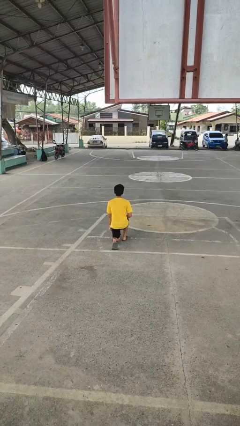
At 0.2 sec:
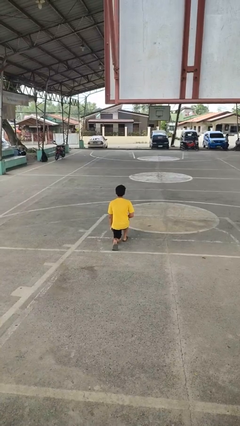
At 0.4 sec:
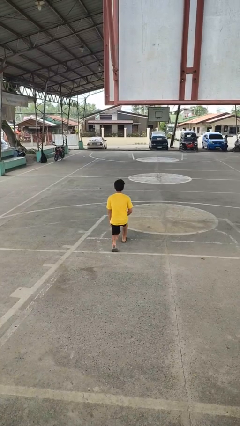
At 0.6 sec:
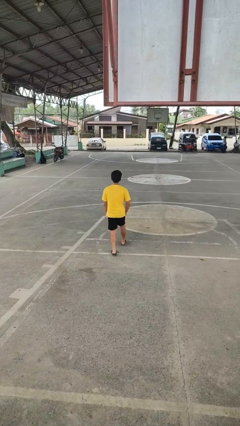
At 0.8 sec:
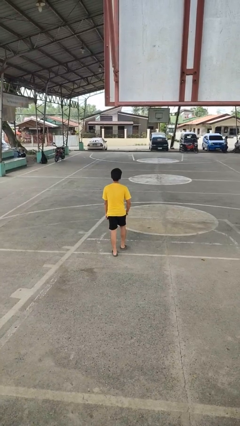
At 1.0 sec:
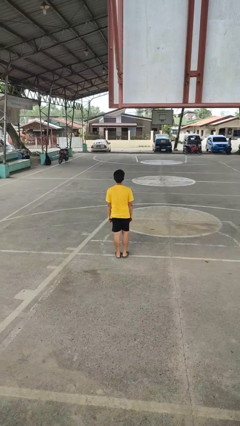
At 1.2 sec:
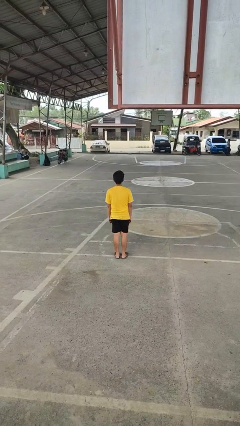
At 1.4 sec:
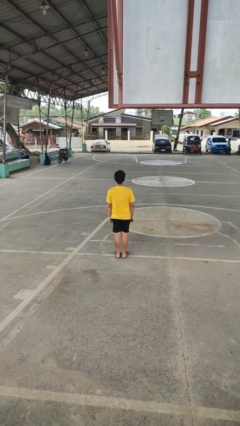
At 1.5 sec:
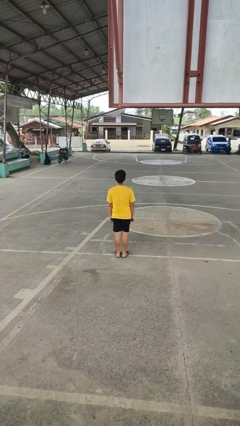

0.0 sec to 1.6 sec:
person stands up from floor

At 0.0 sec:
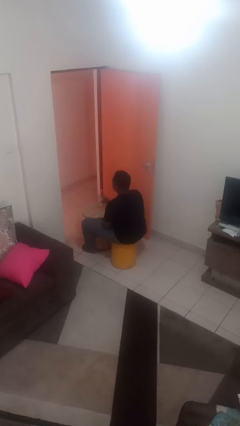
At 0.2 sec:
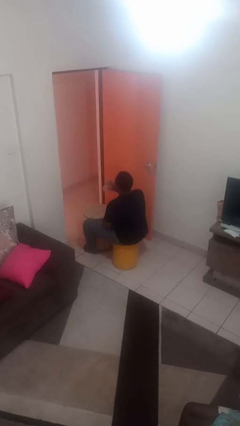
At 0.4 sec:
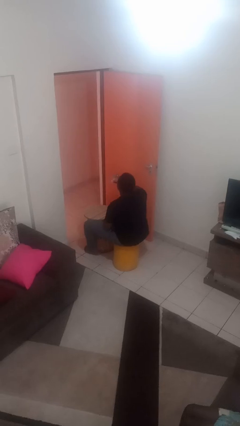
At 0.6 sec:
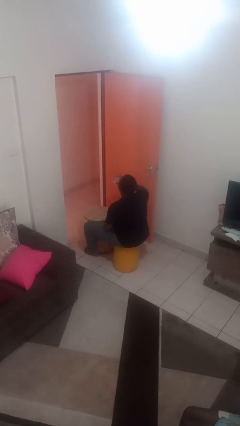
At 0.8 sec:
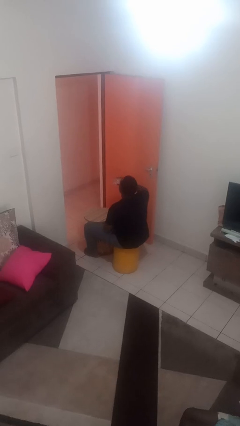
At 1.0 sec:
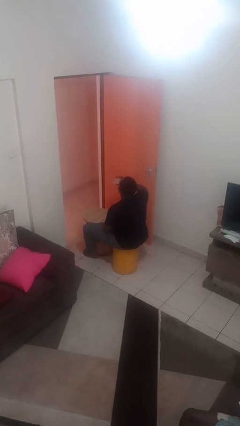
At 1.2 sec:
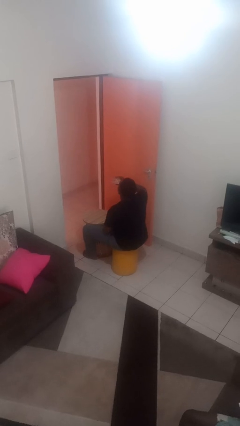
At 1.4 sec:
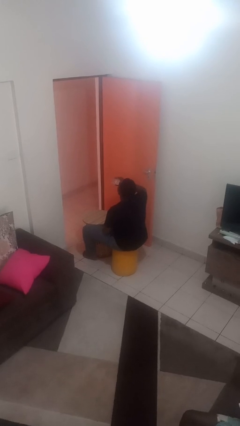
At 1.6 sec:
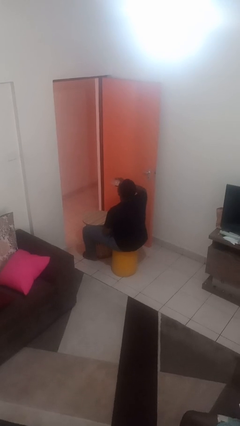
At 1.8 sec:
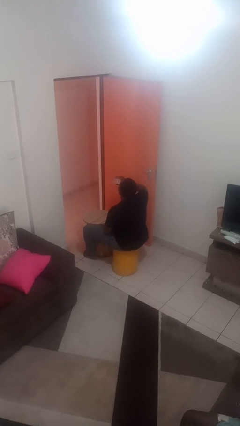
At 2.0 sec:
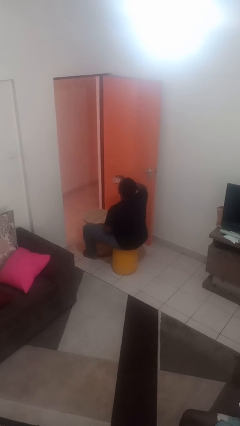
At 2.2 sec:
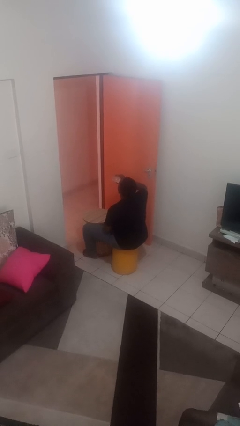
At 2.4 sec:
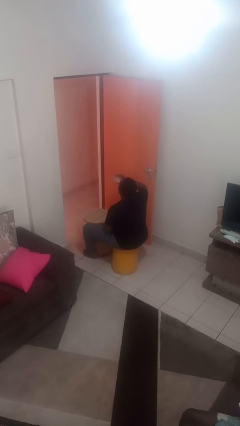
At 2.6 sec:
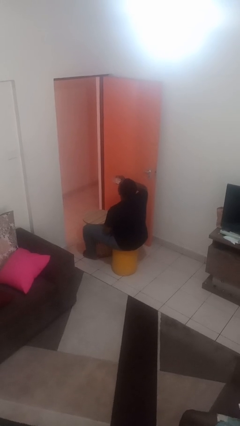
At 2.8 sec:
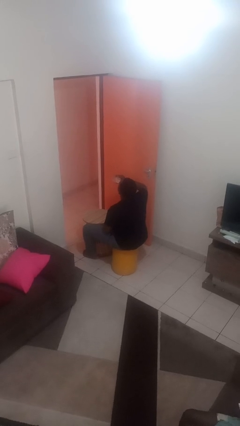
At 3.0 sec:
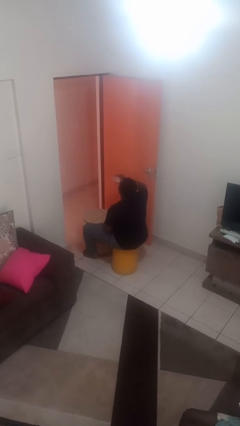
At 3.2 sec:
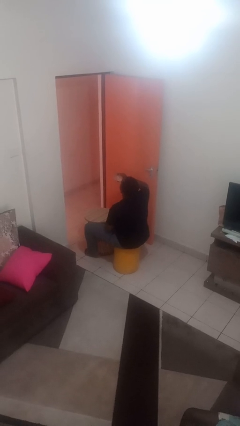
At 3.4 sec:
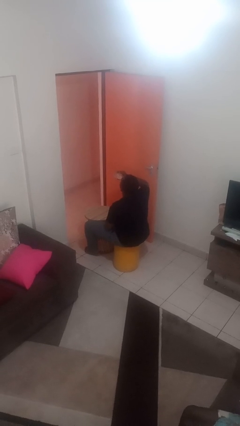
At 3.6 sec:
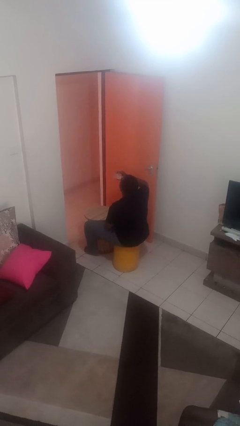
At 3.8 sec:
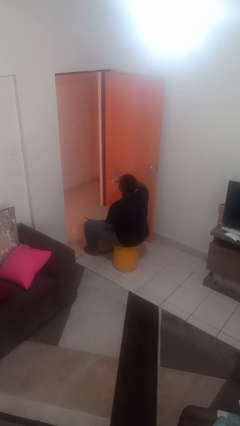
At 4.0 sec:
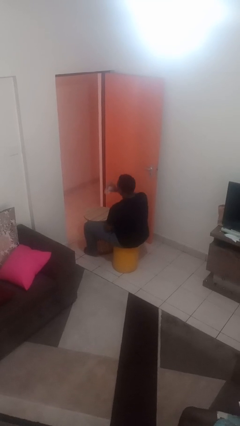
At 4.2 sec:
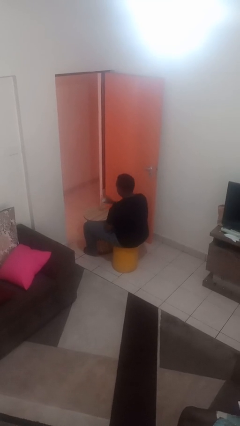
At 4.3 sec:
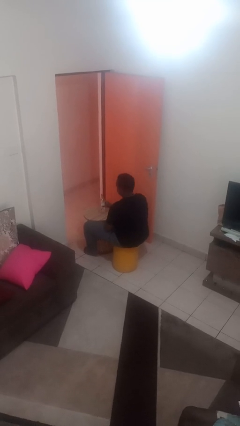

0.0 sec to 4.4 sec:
person drinks from bottle

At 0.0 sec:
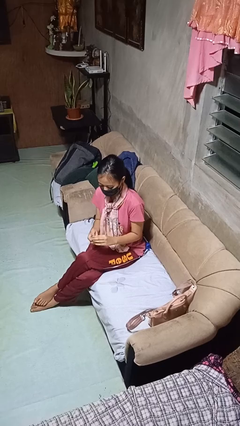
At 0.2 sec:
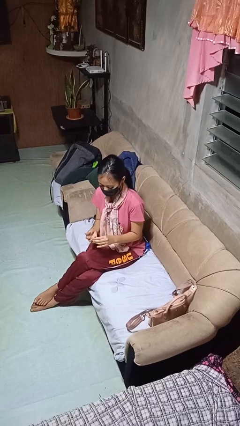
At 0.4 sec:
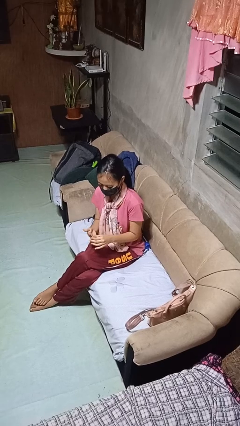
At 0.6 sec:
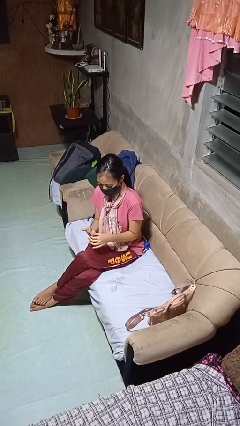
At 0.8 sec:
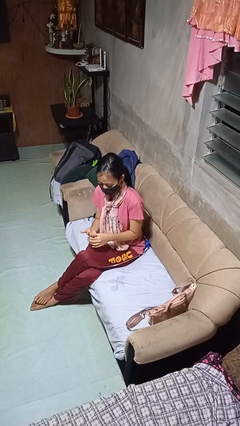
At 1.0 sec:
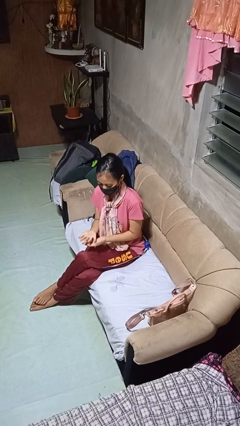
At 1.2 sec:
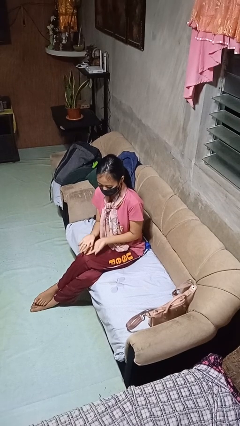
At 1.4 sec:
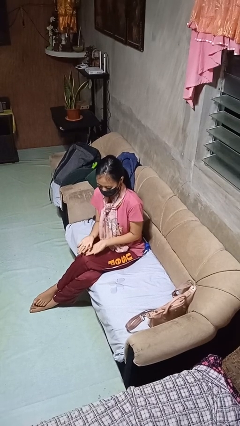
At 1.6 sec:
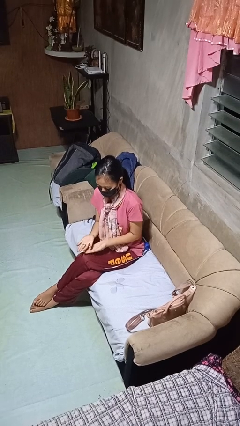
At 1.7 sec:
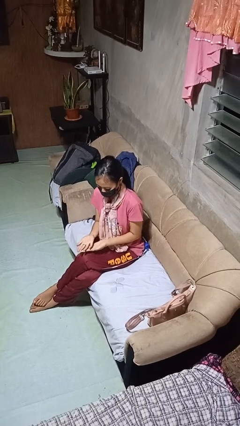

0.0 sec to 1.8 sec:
person puts on ring

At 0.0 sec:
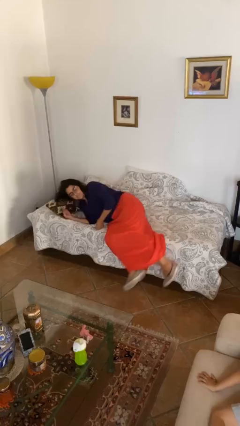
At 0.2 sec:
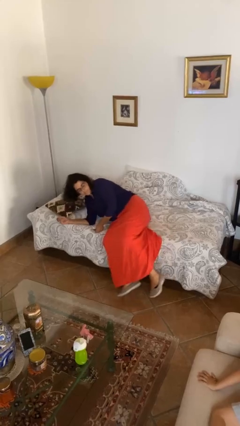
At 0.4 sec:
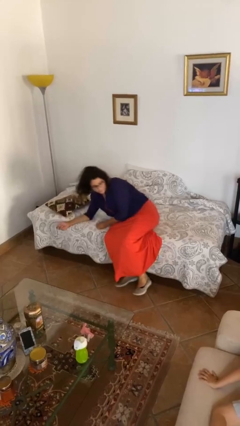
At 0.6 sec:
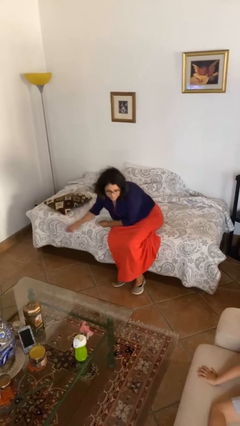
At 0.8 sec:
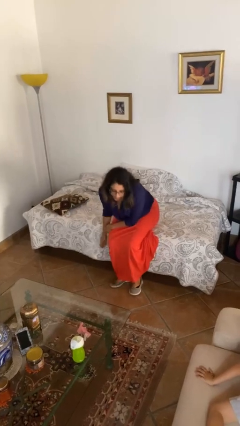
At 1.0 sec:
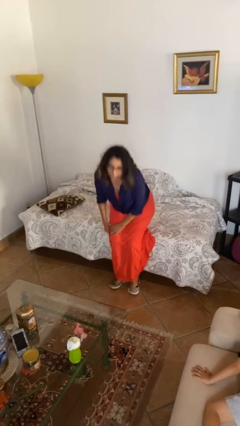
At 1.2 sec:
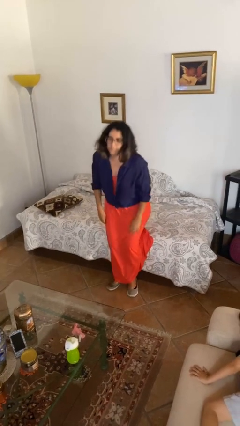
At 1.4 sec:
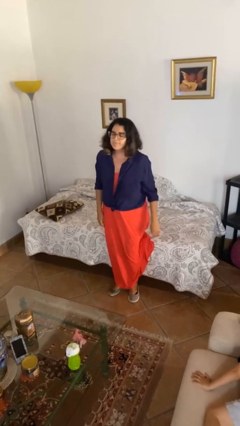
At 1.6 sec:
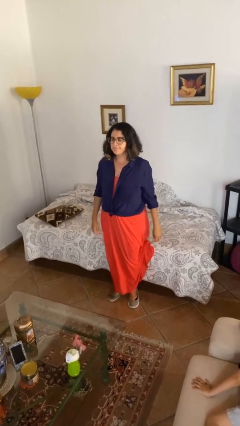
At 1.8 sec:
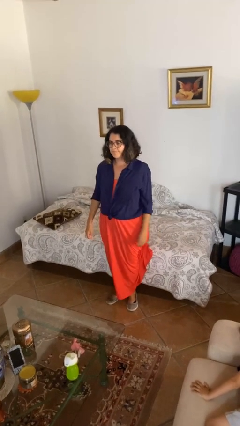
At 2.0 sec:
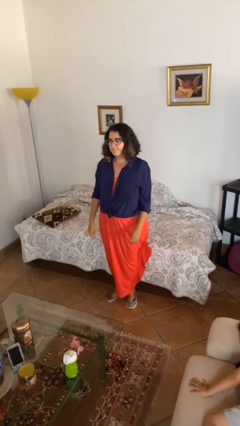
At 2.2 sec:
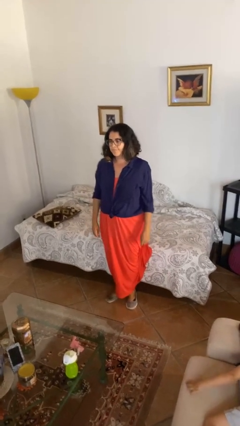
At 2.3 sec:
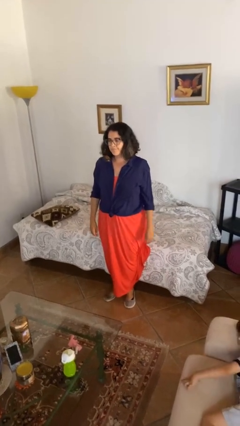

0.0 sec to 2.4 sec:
person stands up

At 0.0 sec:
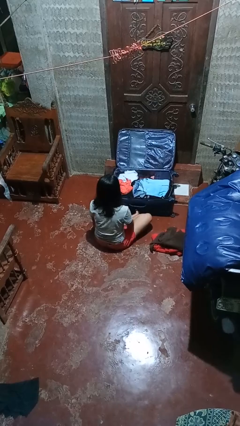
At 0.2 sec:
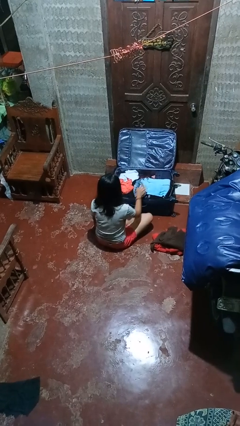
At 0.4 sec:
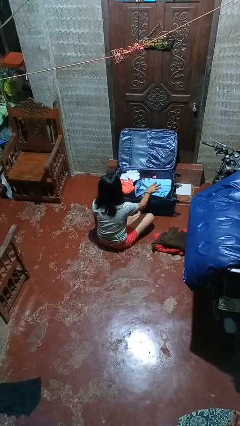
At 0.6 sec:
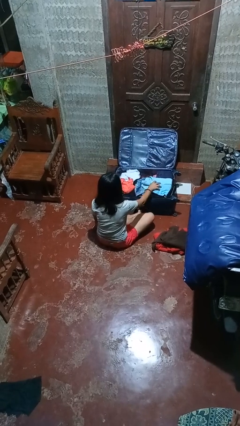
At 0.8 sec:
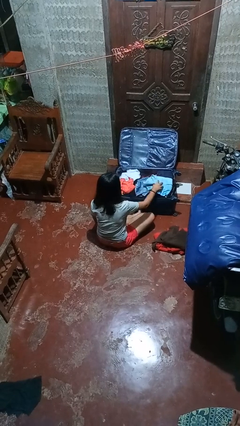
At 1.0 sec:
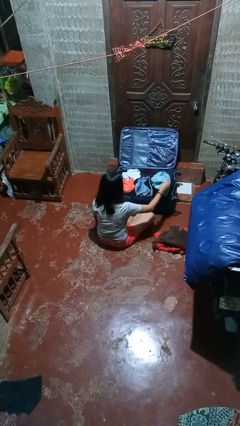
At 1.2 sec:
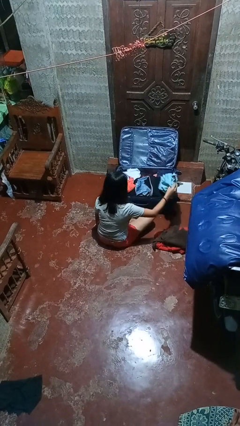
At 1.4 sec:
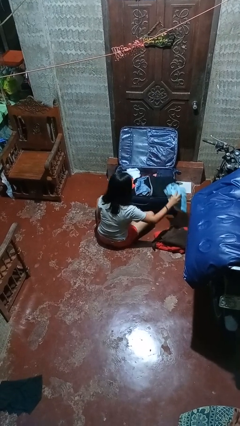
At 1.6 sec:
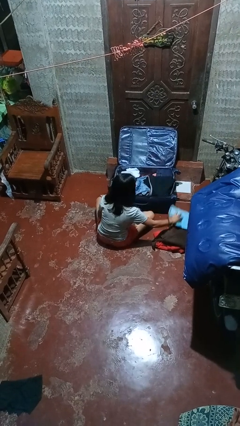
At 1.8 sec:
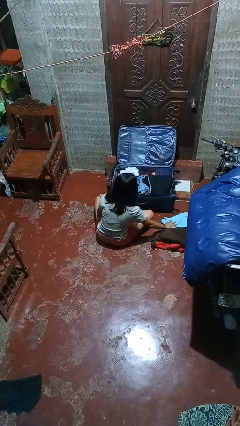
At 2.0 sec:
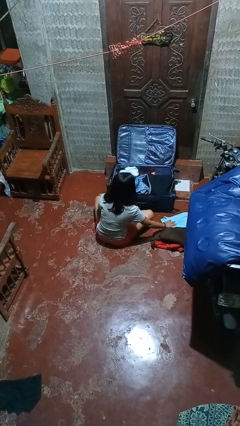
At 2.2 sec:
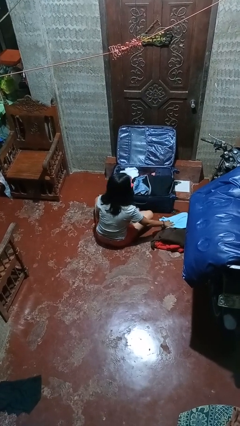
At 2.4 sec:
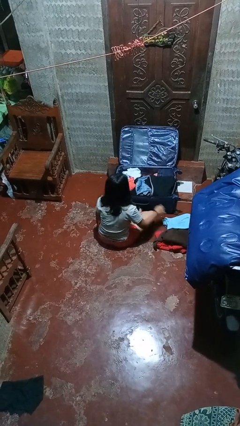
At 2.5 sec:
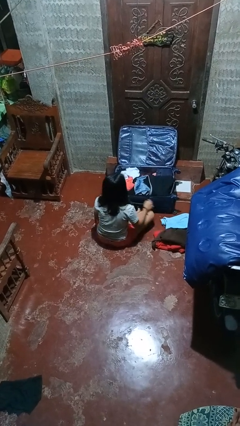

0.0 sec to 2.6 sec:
person unloads clothes from suitcase

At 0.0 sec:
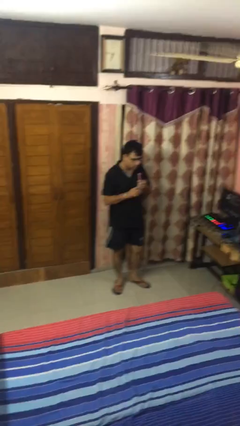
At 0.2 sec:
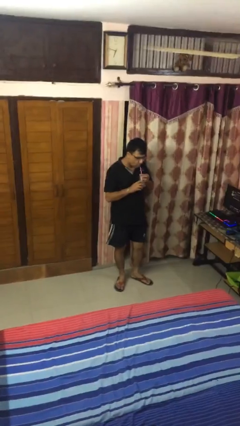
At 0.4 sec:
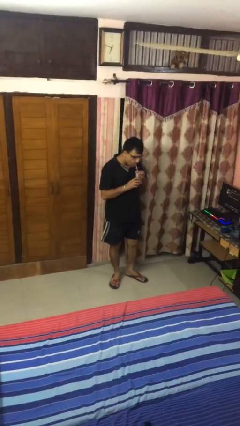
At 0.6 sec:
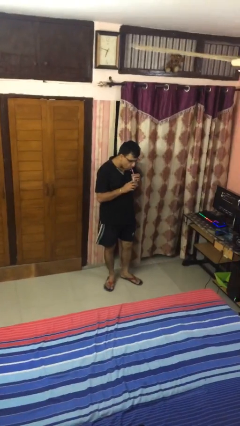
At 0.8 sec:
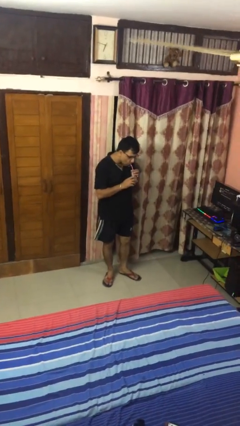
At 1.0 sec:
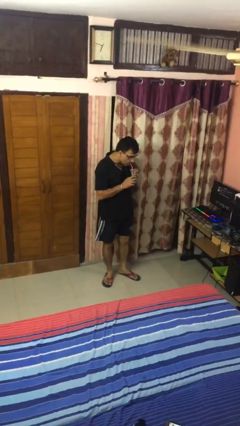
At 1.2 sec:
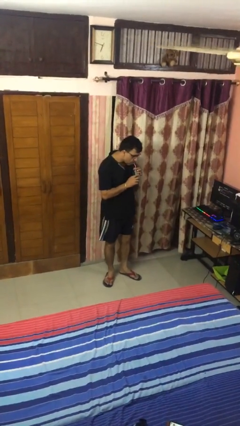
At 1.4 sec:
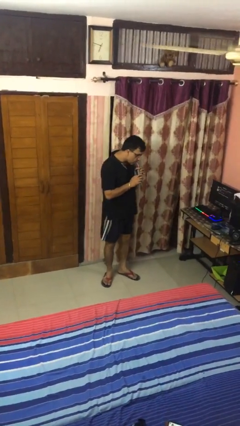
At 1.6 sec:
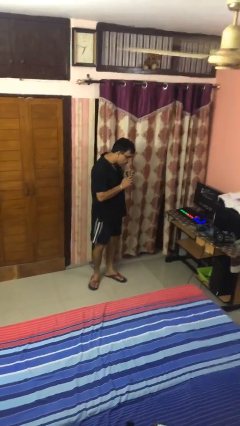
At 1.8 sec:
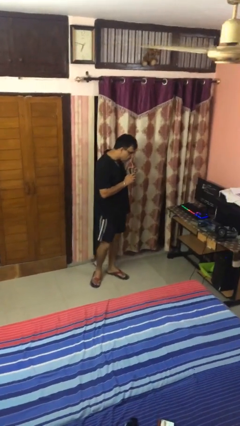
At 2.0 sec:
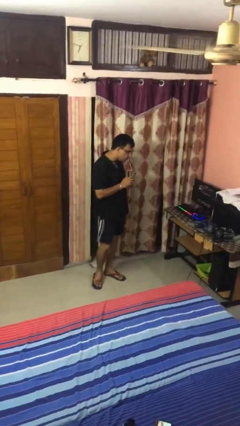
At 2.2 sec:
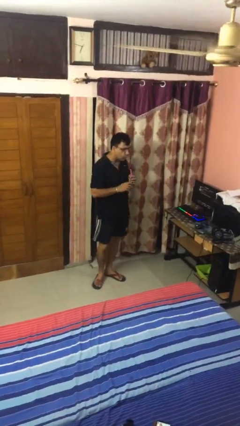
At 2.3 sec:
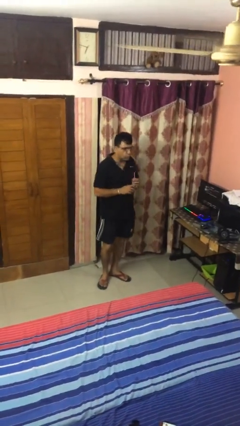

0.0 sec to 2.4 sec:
person drinks from straw

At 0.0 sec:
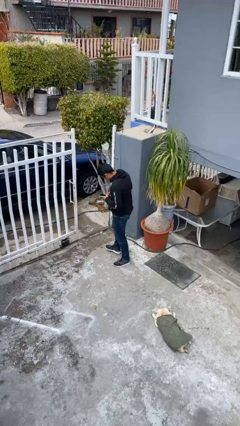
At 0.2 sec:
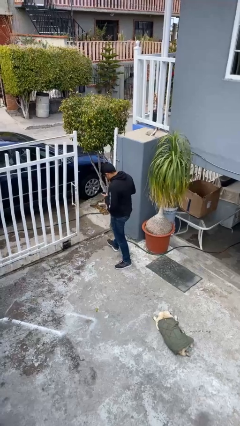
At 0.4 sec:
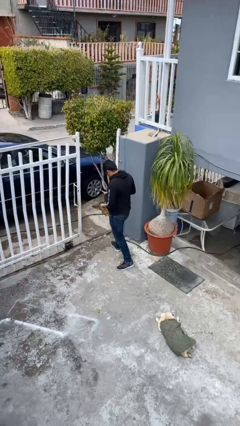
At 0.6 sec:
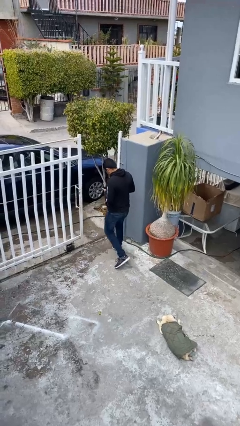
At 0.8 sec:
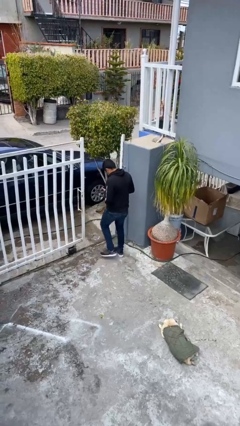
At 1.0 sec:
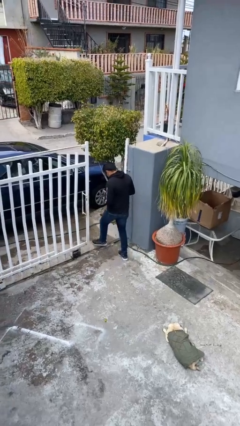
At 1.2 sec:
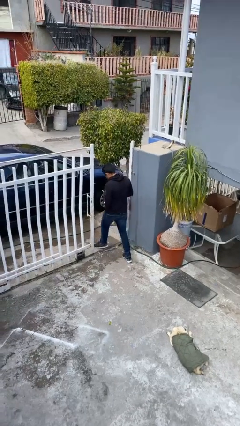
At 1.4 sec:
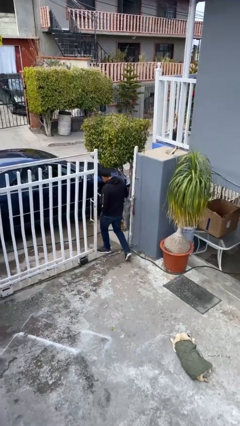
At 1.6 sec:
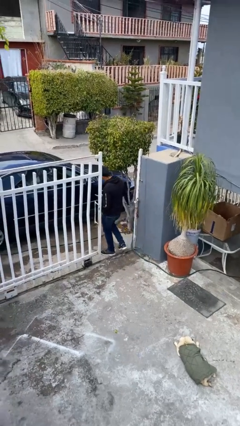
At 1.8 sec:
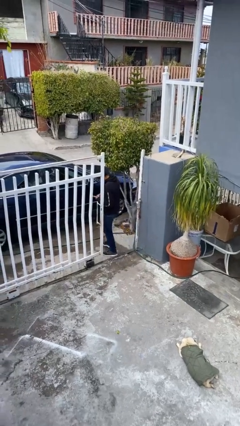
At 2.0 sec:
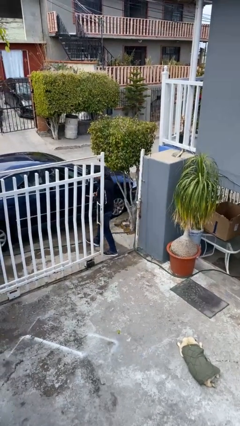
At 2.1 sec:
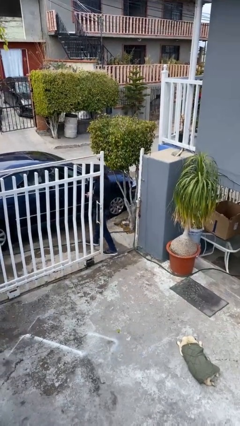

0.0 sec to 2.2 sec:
person exits scene through structure
